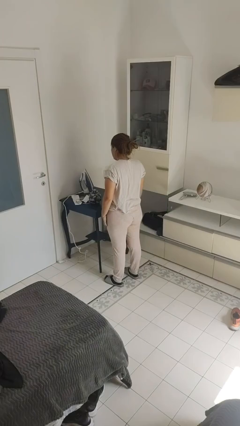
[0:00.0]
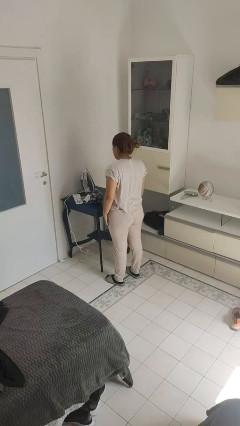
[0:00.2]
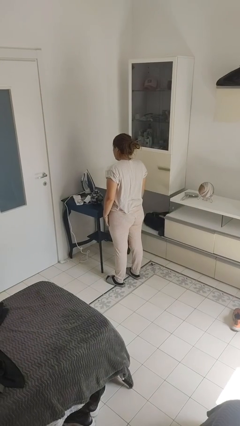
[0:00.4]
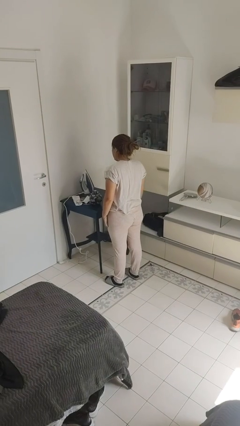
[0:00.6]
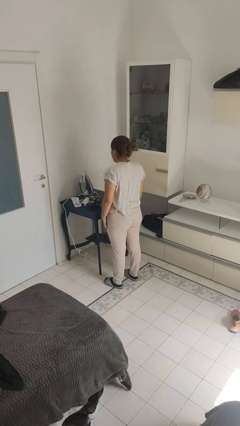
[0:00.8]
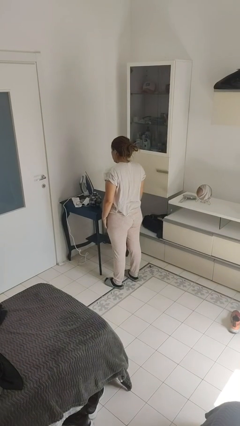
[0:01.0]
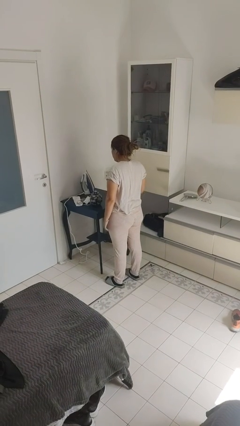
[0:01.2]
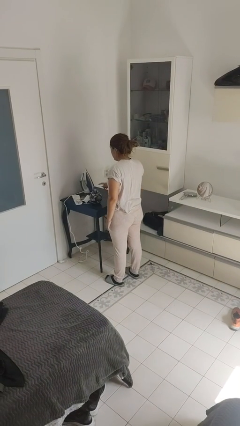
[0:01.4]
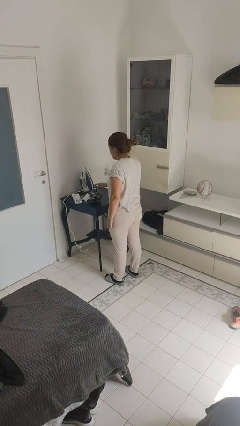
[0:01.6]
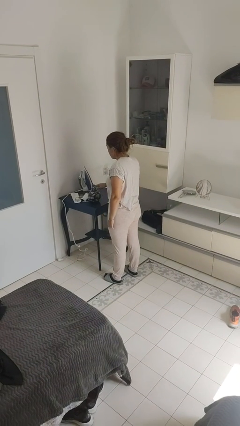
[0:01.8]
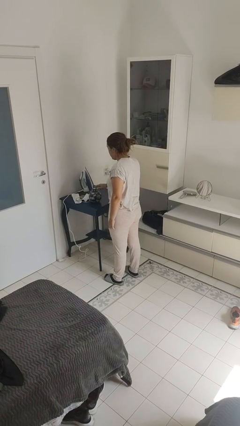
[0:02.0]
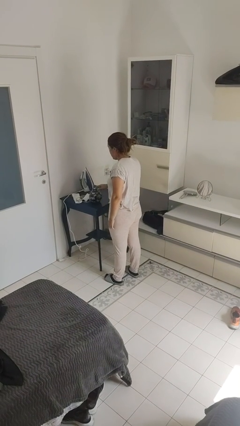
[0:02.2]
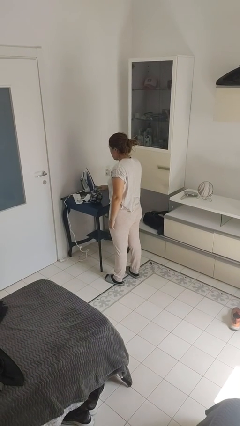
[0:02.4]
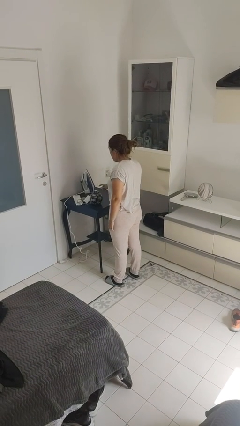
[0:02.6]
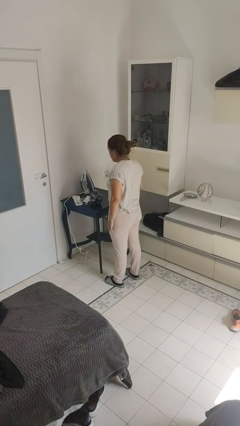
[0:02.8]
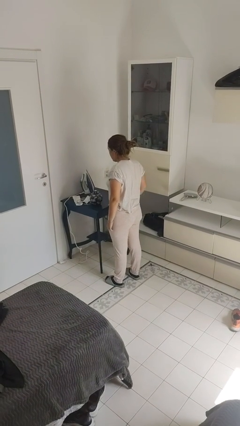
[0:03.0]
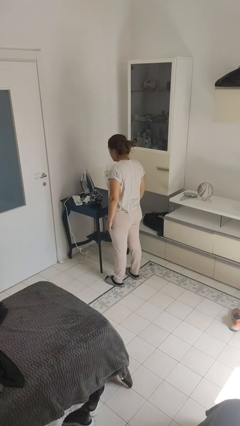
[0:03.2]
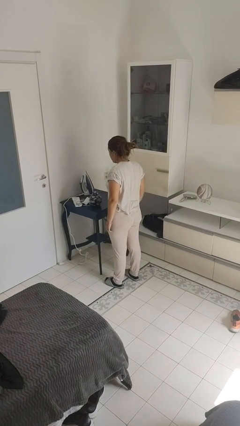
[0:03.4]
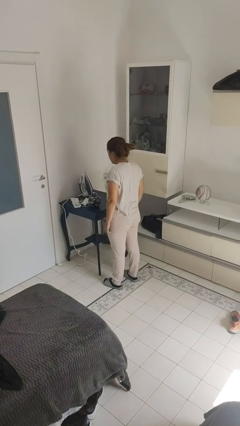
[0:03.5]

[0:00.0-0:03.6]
person taps object with finger

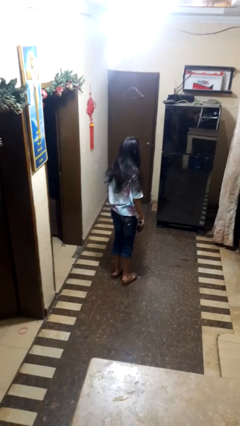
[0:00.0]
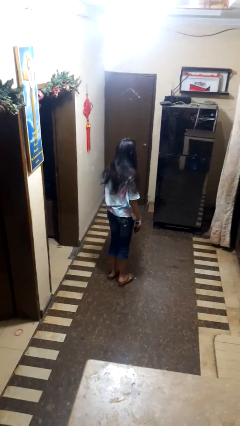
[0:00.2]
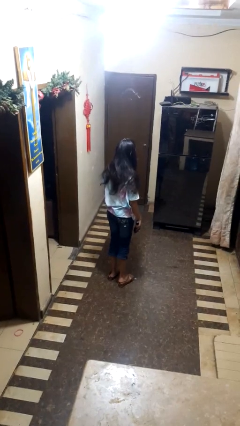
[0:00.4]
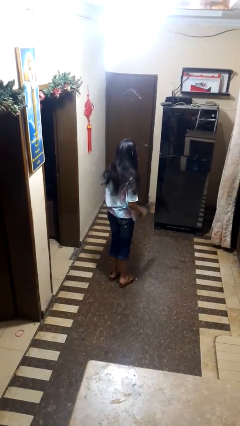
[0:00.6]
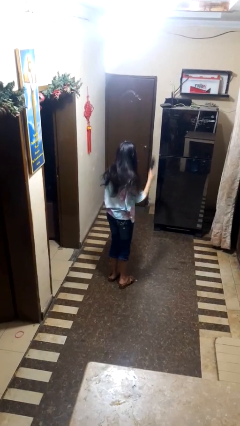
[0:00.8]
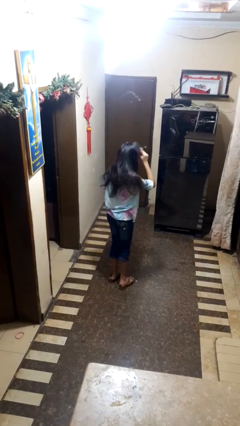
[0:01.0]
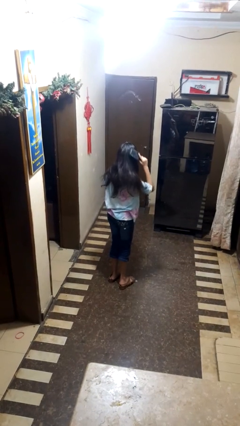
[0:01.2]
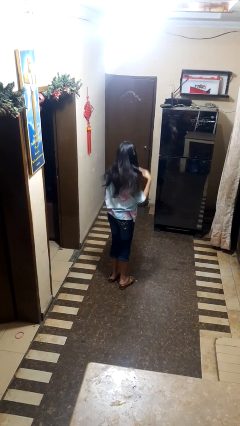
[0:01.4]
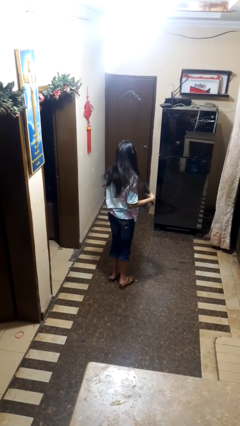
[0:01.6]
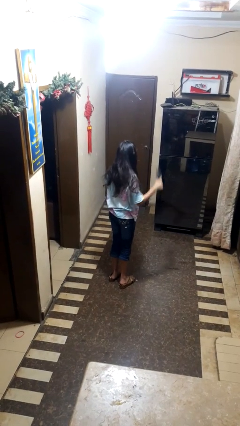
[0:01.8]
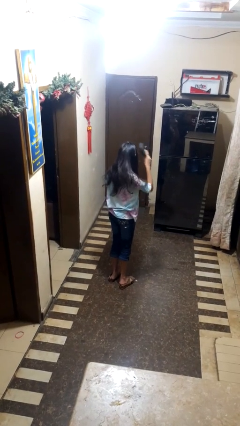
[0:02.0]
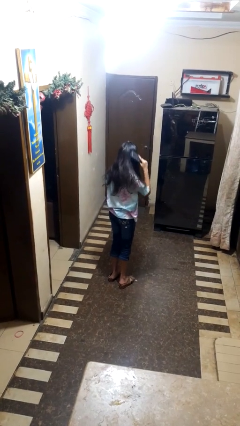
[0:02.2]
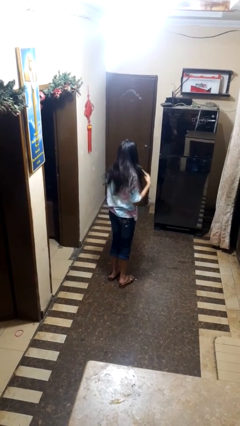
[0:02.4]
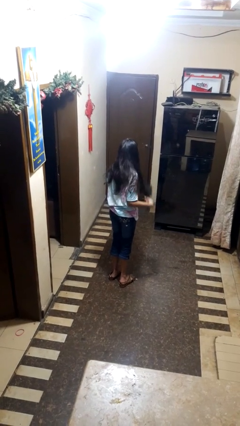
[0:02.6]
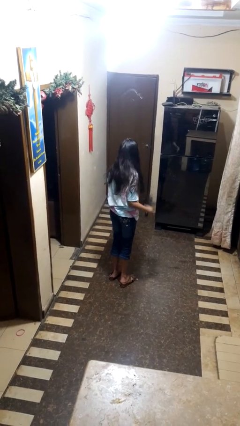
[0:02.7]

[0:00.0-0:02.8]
person brushes hair

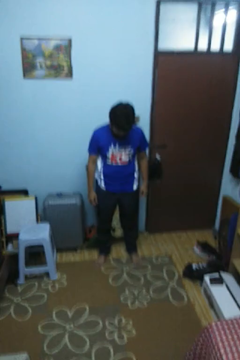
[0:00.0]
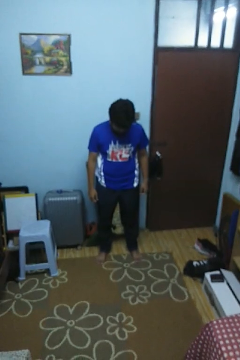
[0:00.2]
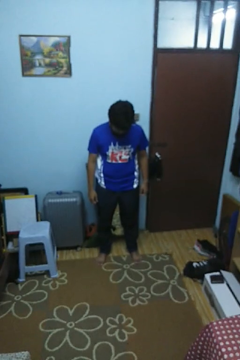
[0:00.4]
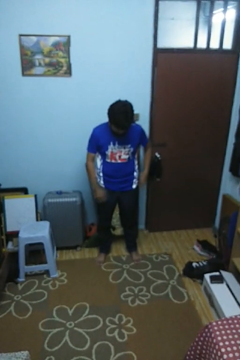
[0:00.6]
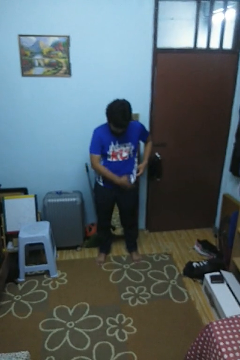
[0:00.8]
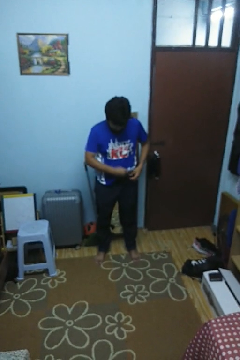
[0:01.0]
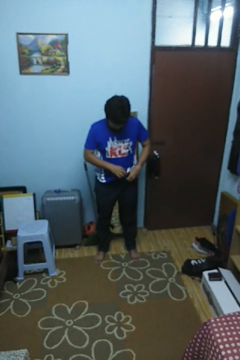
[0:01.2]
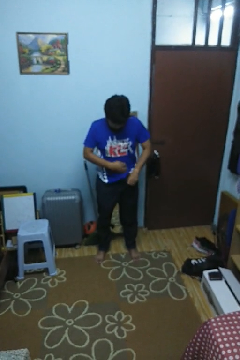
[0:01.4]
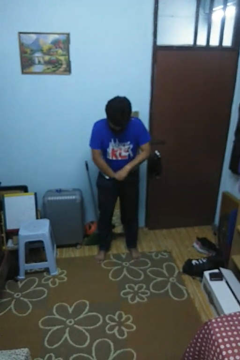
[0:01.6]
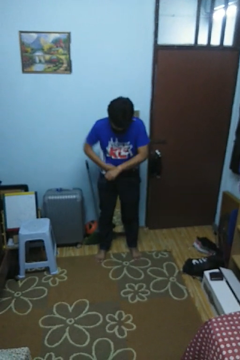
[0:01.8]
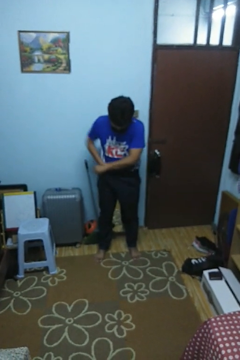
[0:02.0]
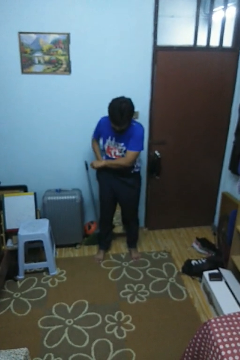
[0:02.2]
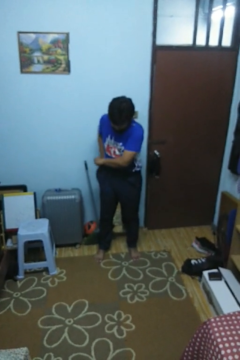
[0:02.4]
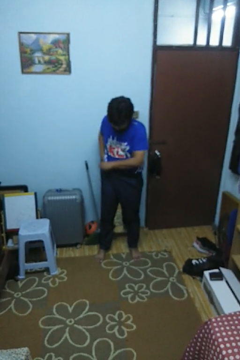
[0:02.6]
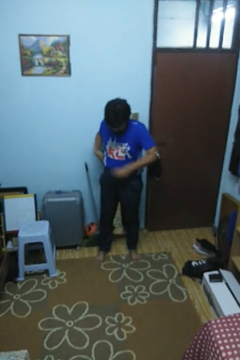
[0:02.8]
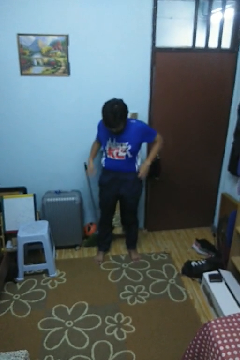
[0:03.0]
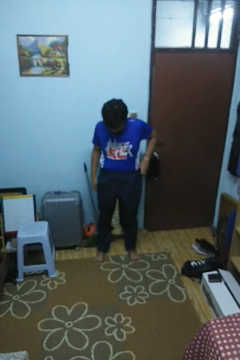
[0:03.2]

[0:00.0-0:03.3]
person tucks in shirt

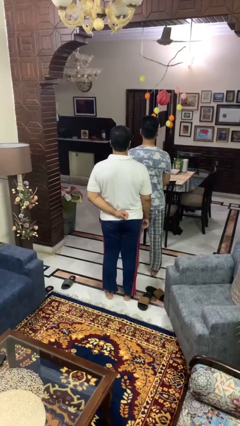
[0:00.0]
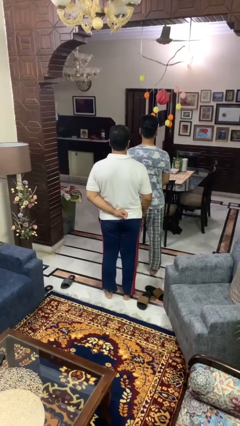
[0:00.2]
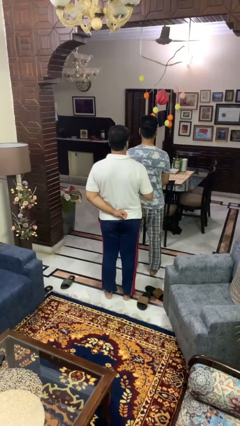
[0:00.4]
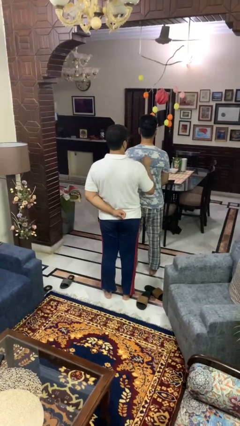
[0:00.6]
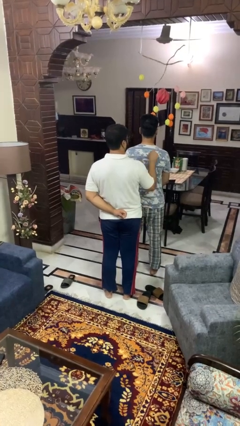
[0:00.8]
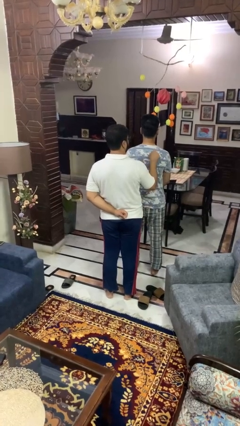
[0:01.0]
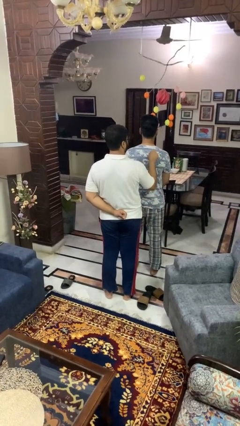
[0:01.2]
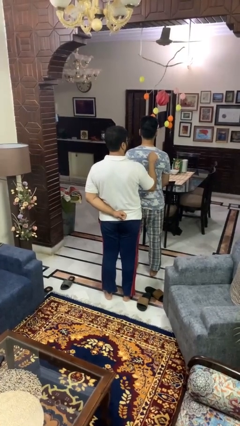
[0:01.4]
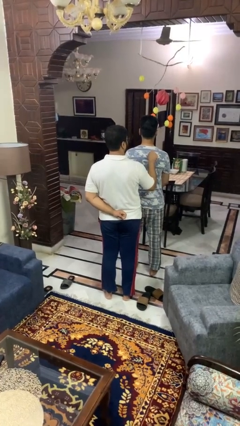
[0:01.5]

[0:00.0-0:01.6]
person touches back of person

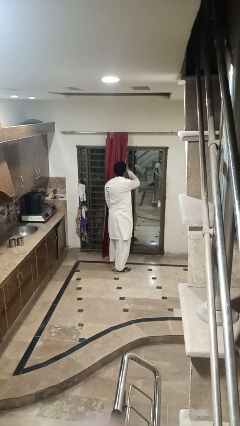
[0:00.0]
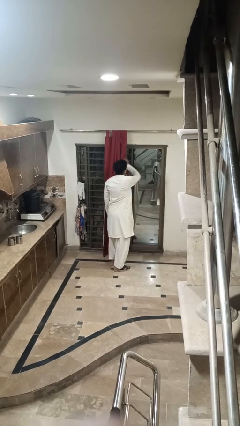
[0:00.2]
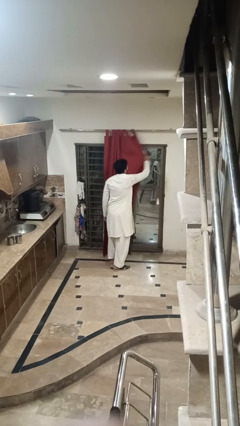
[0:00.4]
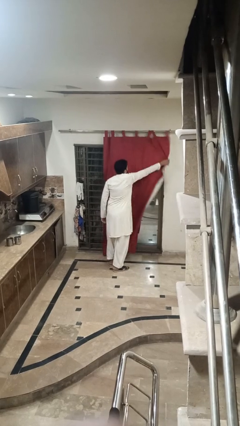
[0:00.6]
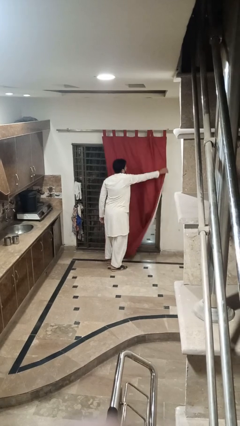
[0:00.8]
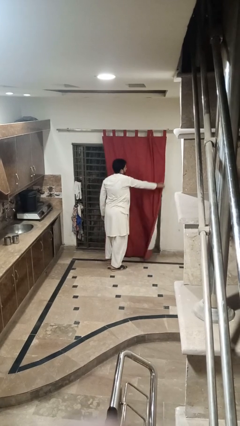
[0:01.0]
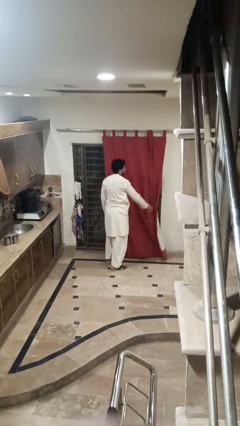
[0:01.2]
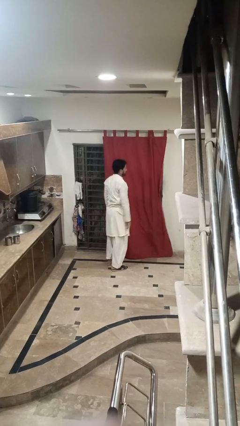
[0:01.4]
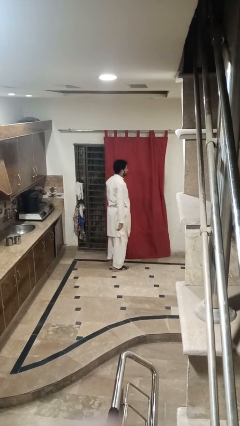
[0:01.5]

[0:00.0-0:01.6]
person closes curtains

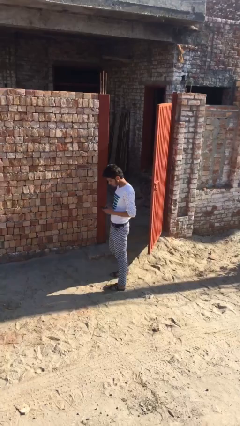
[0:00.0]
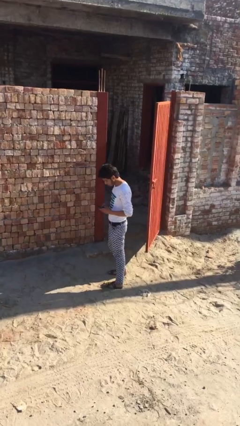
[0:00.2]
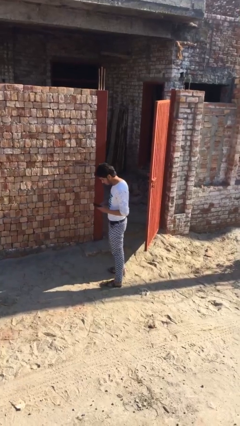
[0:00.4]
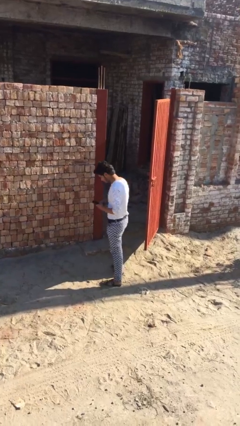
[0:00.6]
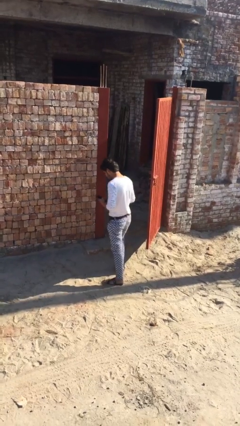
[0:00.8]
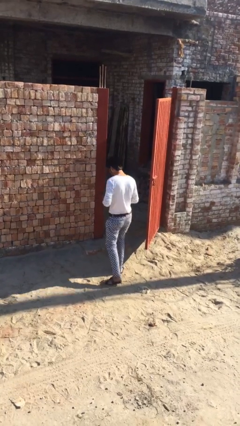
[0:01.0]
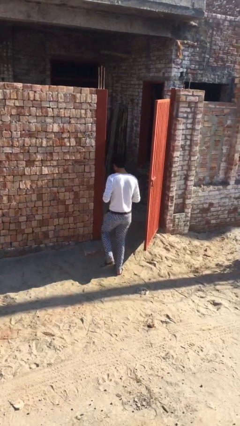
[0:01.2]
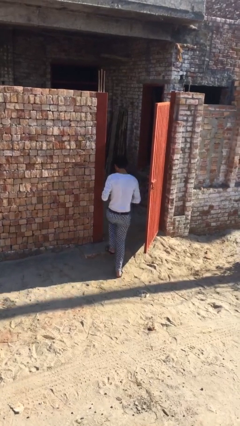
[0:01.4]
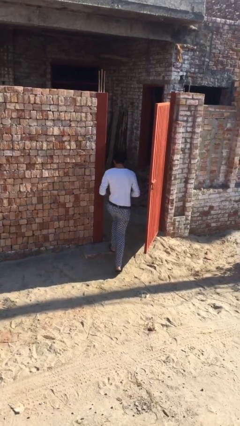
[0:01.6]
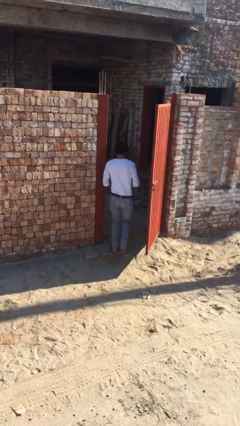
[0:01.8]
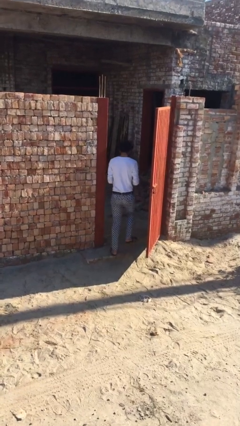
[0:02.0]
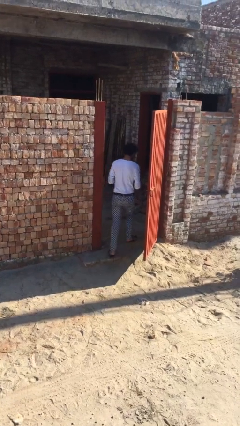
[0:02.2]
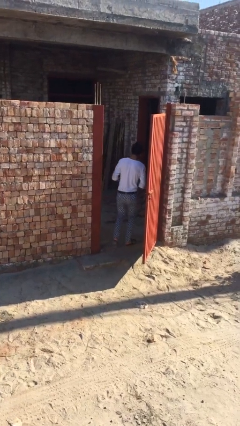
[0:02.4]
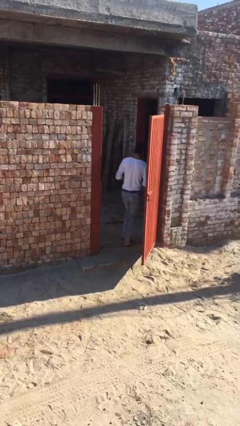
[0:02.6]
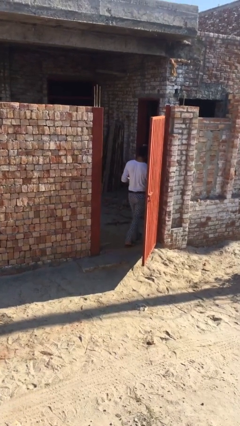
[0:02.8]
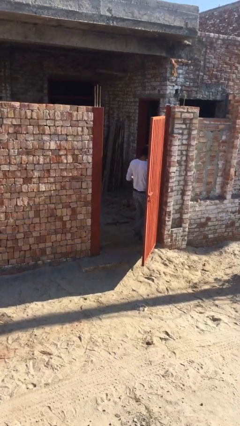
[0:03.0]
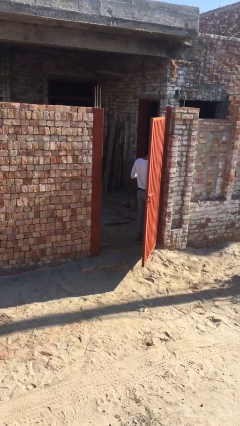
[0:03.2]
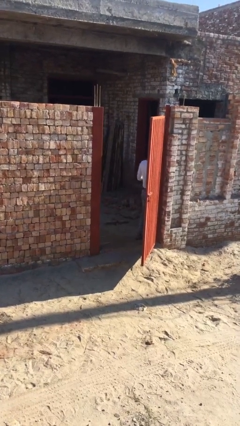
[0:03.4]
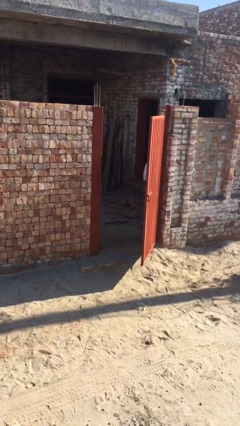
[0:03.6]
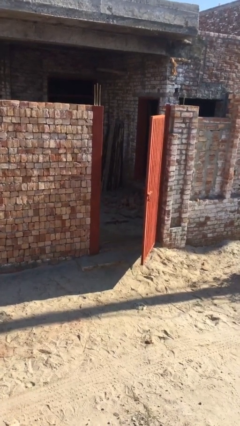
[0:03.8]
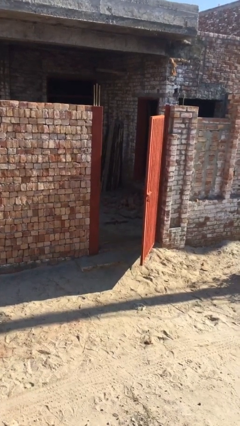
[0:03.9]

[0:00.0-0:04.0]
person exits scene through structure

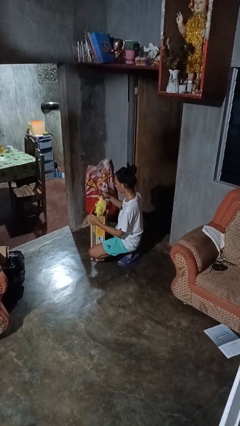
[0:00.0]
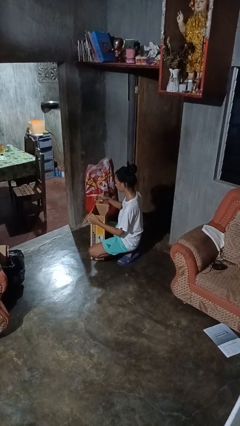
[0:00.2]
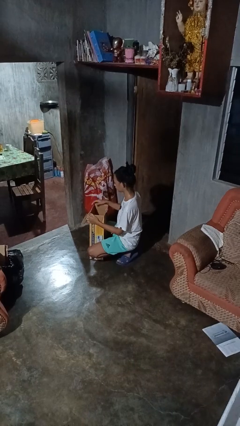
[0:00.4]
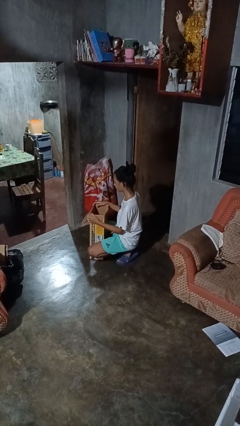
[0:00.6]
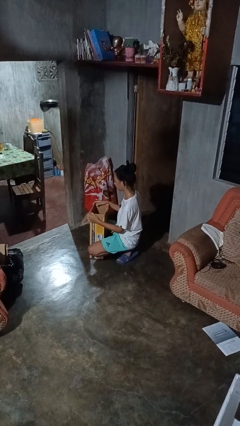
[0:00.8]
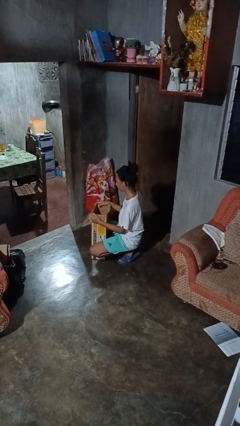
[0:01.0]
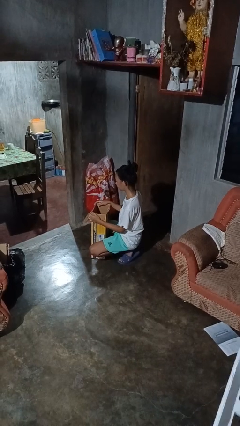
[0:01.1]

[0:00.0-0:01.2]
person puts object into box
